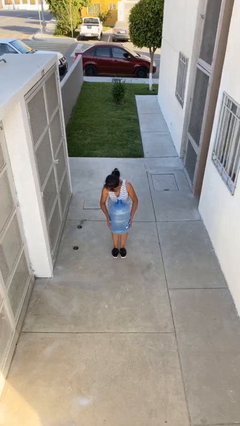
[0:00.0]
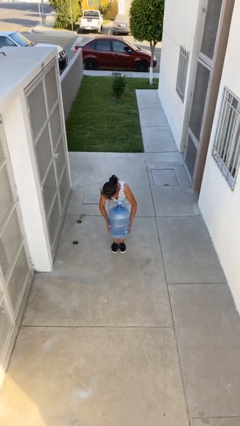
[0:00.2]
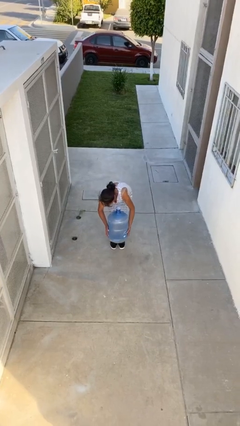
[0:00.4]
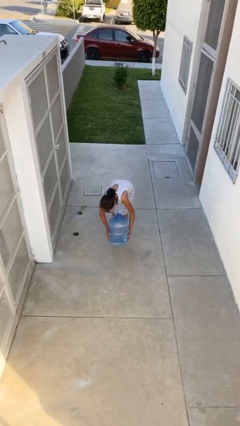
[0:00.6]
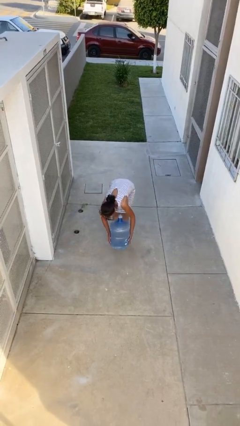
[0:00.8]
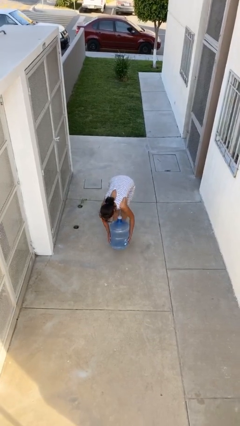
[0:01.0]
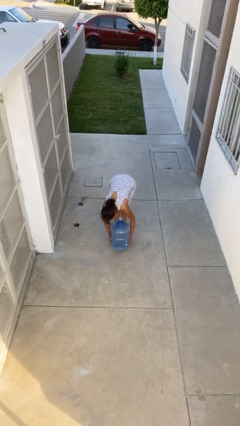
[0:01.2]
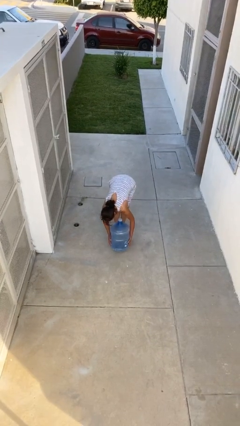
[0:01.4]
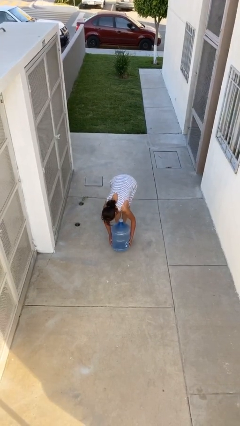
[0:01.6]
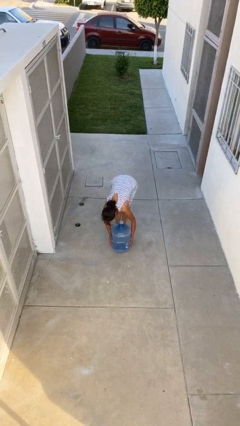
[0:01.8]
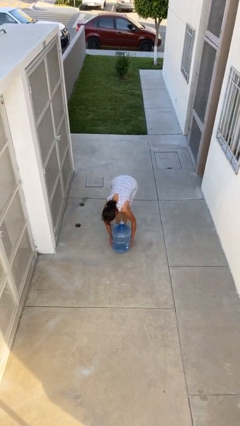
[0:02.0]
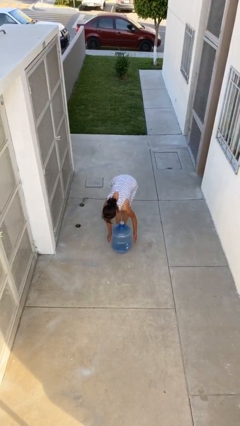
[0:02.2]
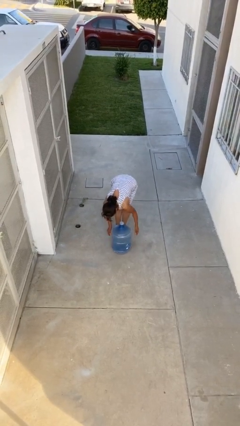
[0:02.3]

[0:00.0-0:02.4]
person puts down object on floor

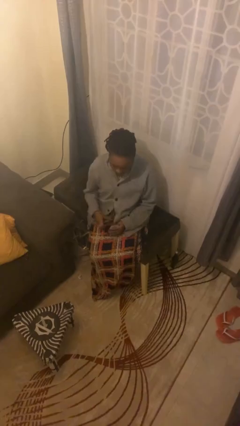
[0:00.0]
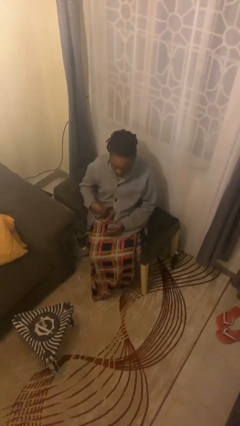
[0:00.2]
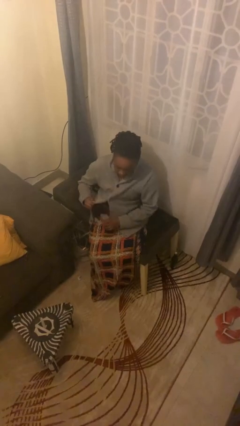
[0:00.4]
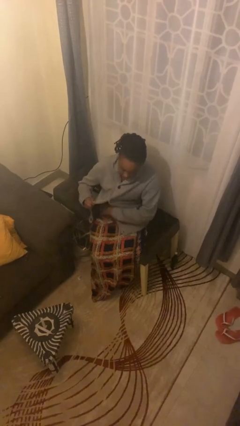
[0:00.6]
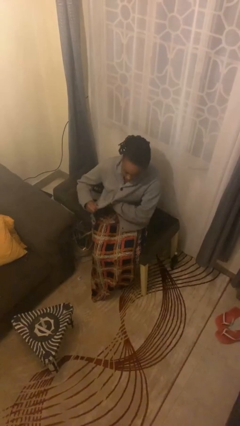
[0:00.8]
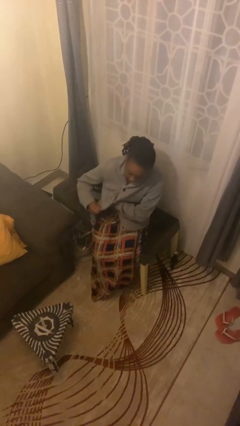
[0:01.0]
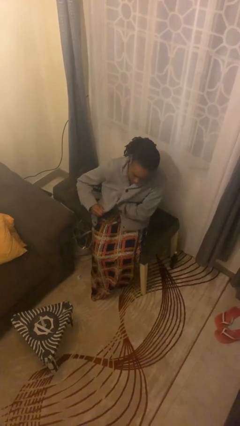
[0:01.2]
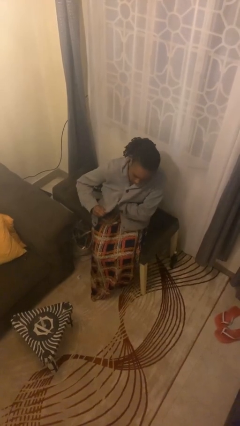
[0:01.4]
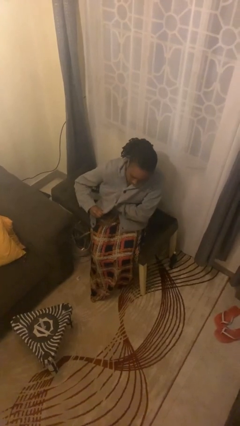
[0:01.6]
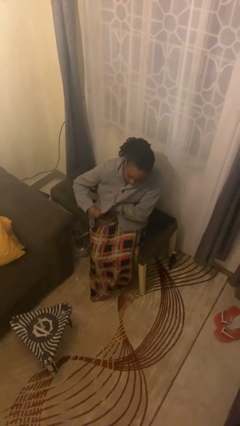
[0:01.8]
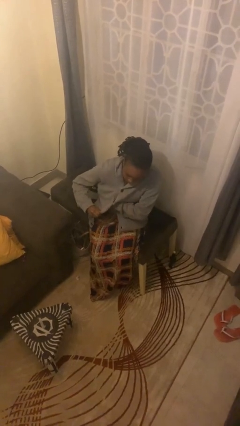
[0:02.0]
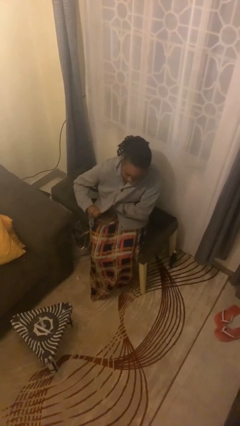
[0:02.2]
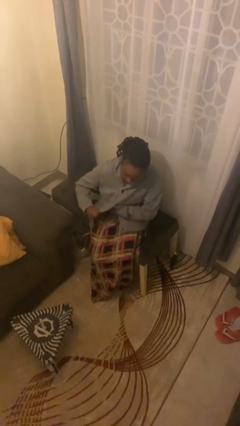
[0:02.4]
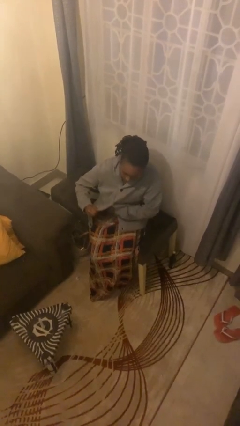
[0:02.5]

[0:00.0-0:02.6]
person applies deodorant

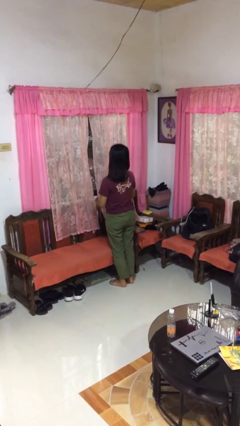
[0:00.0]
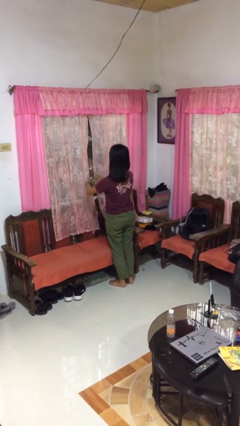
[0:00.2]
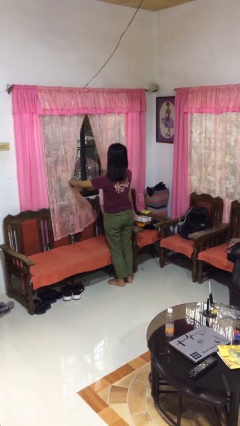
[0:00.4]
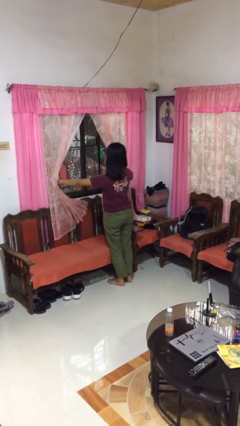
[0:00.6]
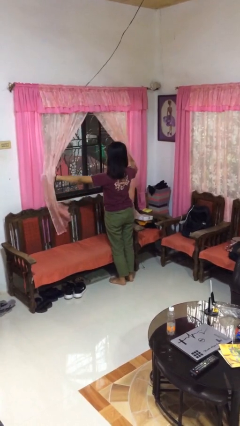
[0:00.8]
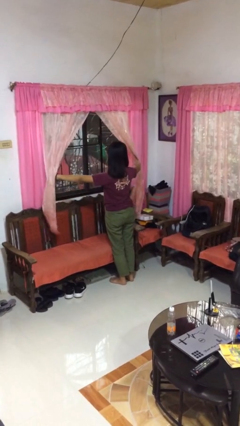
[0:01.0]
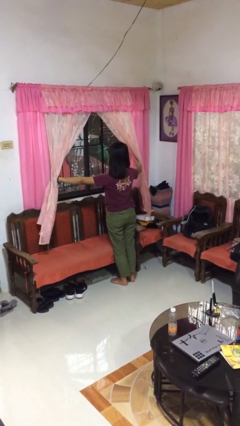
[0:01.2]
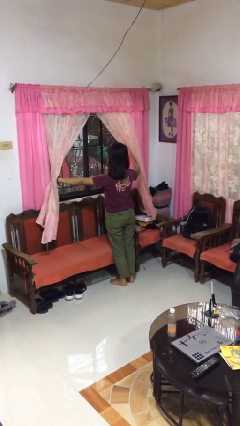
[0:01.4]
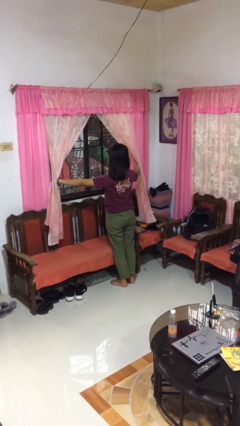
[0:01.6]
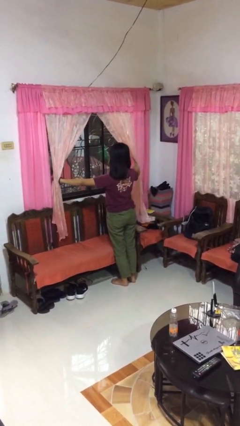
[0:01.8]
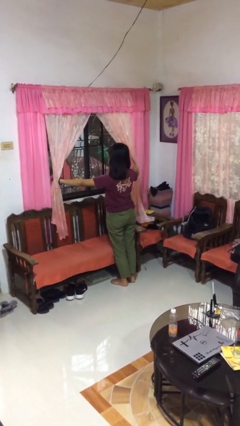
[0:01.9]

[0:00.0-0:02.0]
person opens curtains

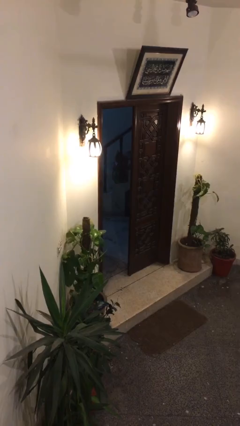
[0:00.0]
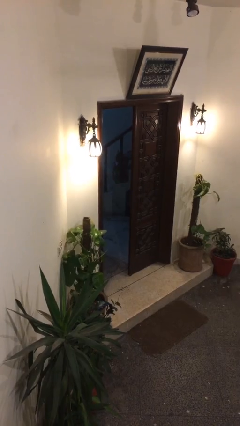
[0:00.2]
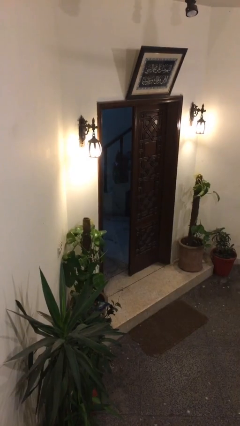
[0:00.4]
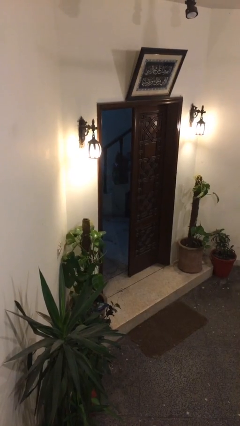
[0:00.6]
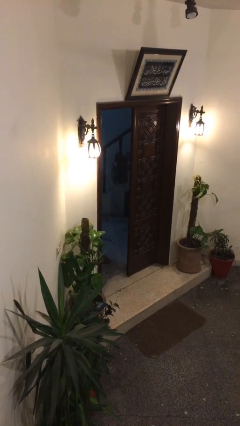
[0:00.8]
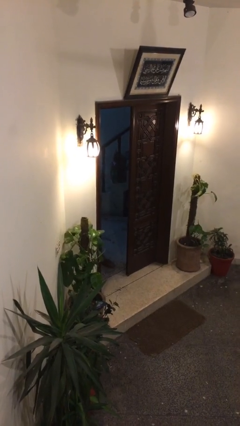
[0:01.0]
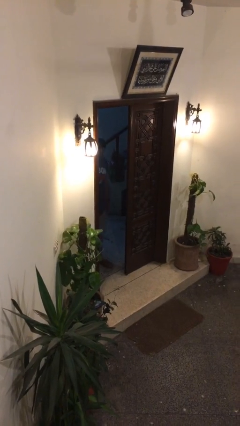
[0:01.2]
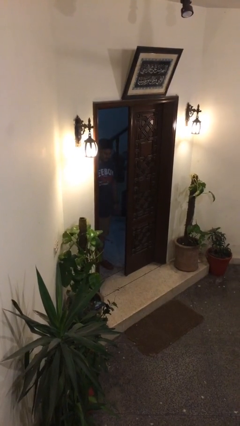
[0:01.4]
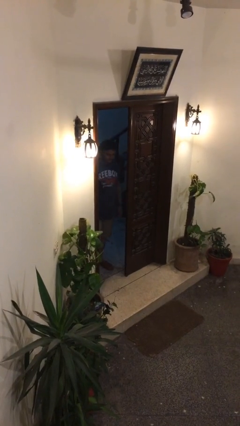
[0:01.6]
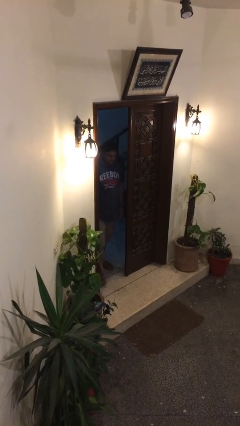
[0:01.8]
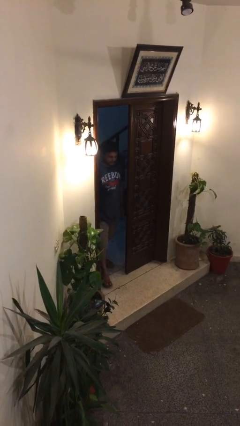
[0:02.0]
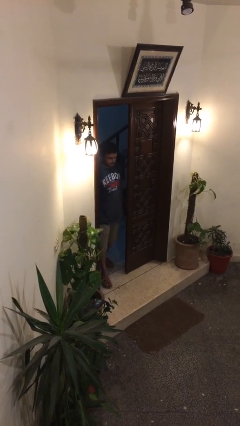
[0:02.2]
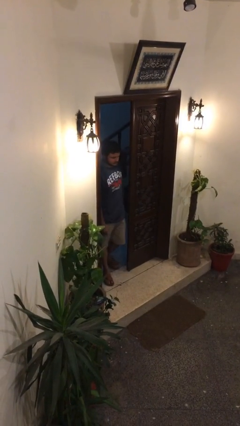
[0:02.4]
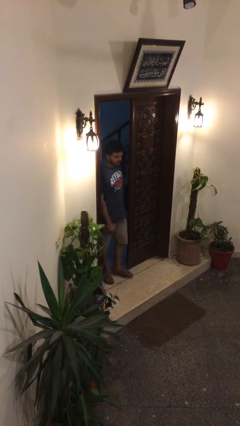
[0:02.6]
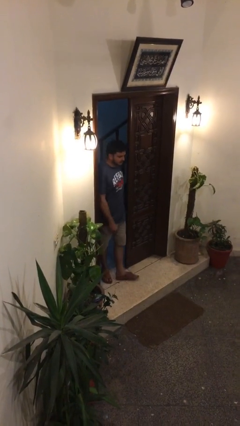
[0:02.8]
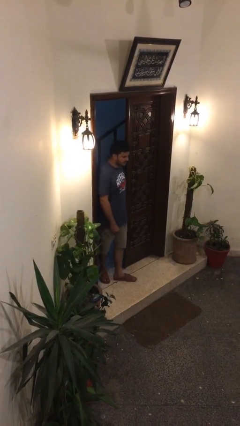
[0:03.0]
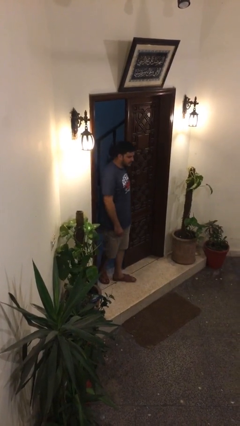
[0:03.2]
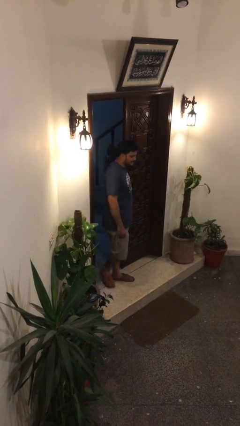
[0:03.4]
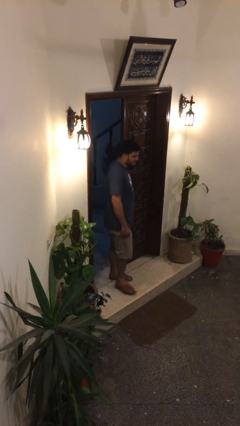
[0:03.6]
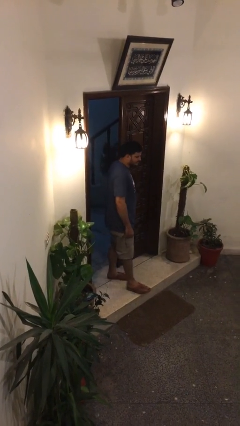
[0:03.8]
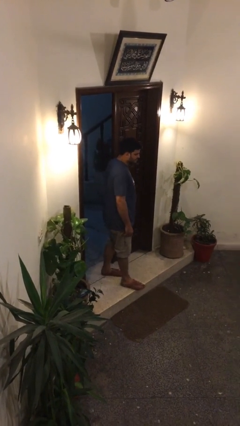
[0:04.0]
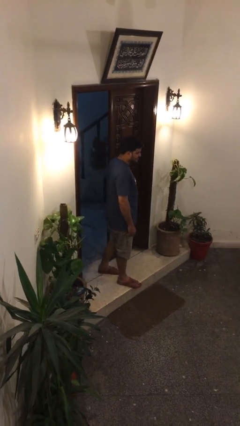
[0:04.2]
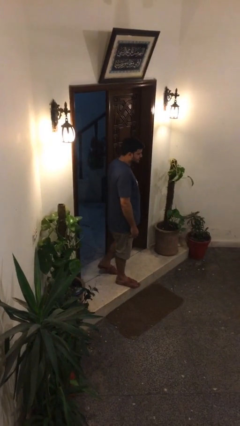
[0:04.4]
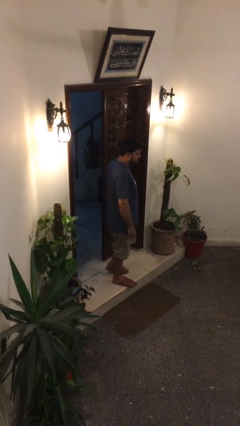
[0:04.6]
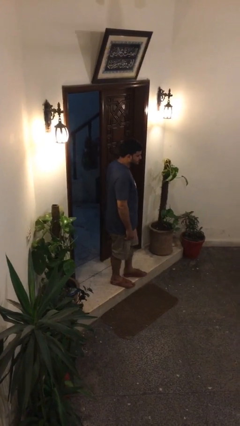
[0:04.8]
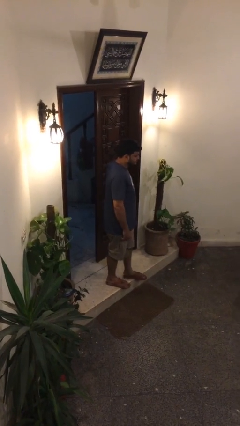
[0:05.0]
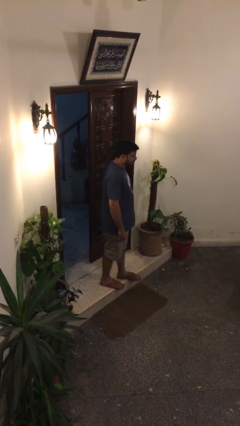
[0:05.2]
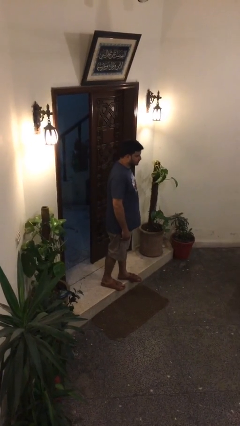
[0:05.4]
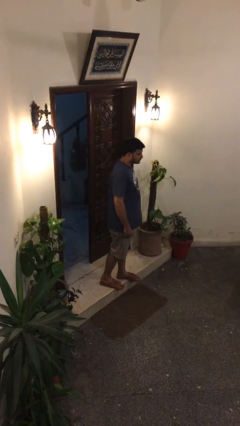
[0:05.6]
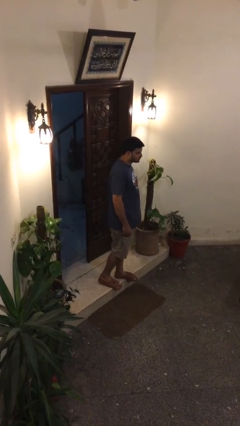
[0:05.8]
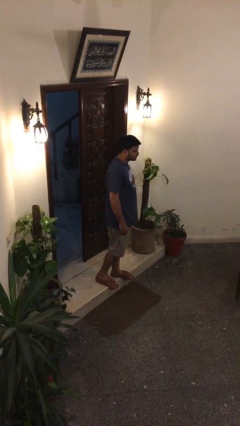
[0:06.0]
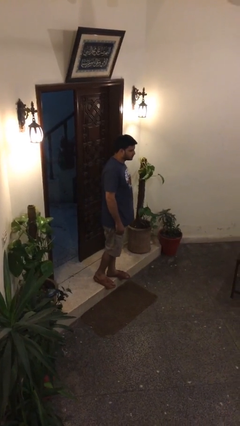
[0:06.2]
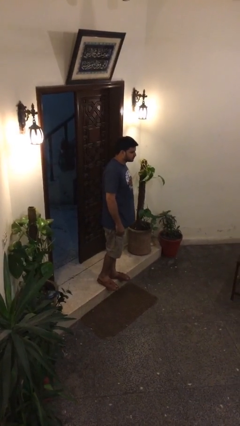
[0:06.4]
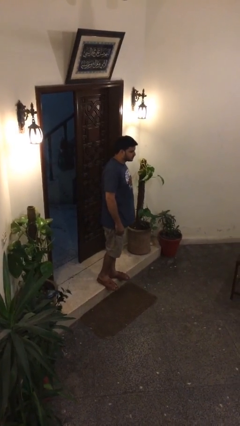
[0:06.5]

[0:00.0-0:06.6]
person enters scene through structure

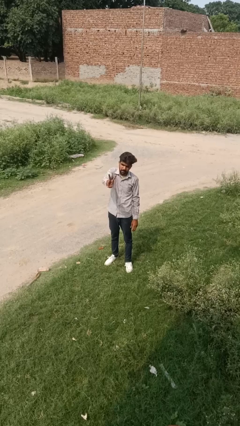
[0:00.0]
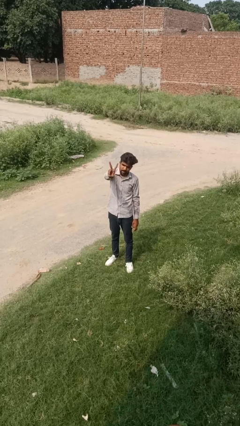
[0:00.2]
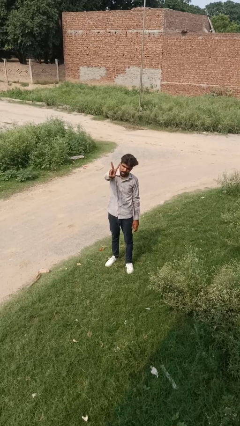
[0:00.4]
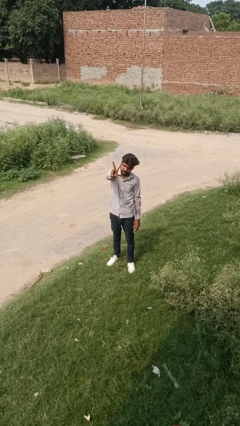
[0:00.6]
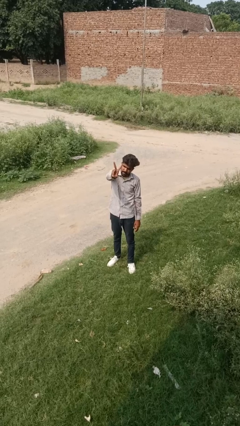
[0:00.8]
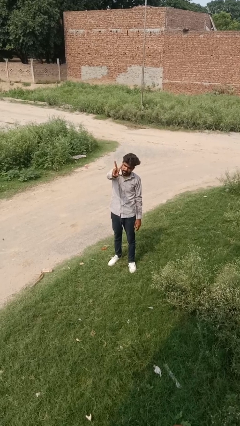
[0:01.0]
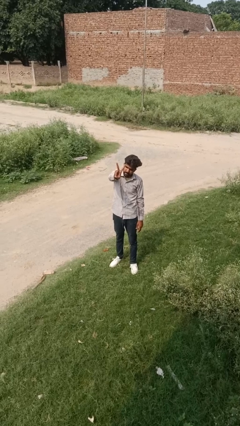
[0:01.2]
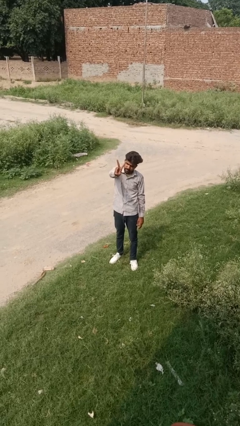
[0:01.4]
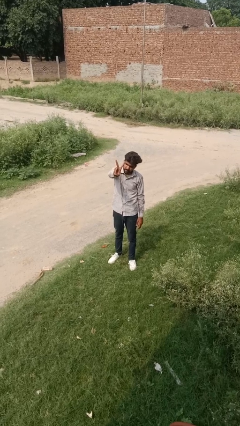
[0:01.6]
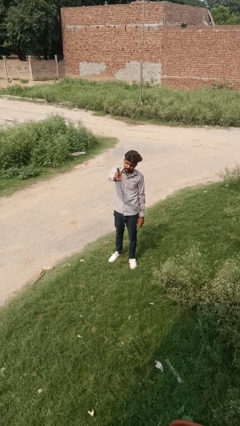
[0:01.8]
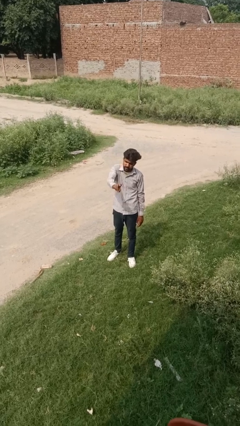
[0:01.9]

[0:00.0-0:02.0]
person gestures peace

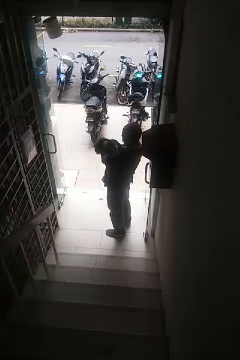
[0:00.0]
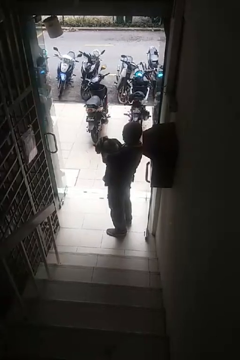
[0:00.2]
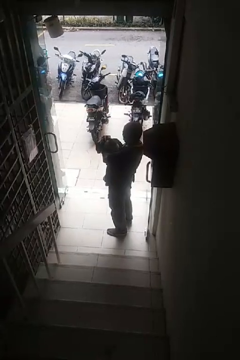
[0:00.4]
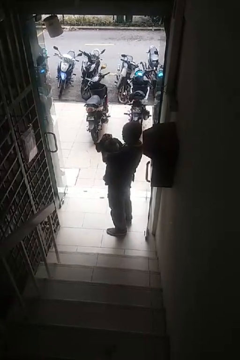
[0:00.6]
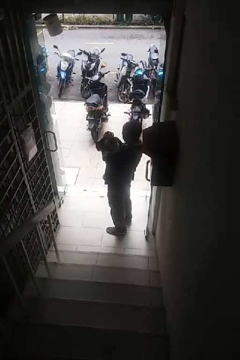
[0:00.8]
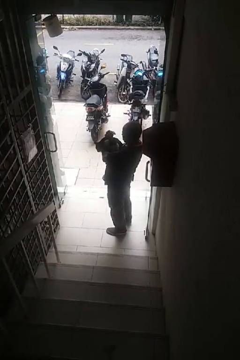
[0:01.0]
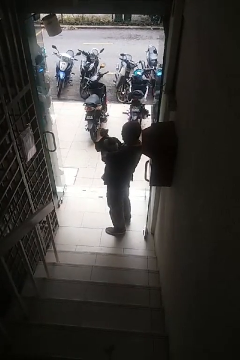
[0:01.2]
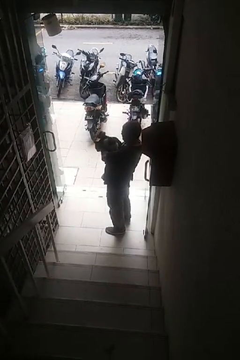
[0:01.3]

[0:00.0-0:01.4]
person hugs cat

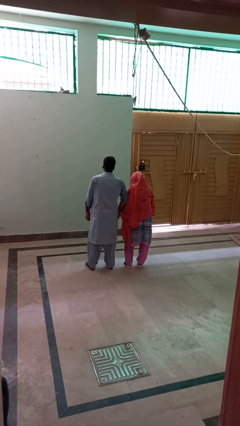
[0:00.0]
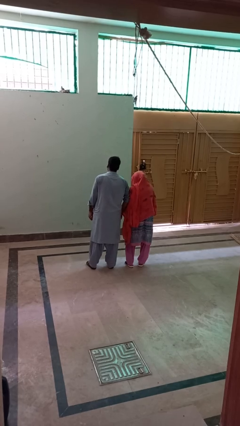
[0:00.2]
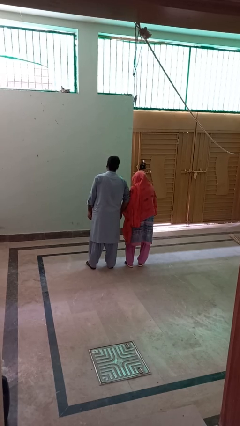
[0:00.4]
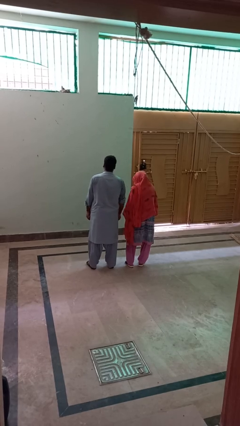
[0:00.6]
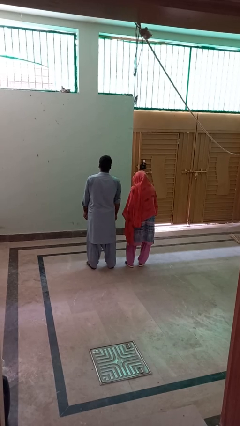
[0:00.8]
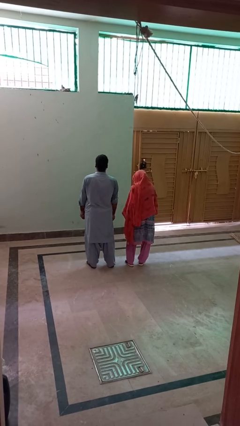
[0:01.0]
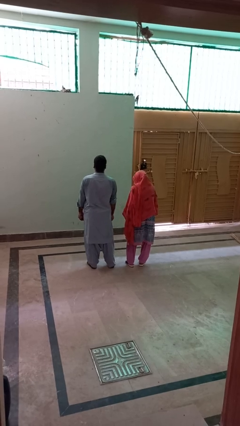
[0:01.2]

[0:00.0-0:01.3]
person nudges person with elbow
